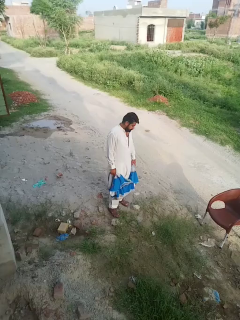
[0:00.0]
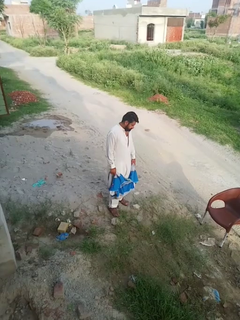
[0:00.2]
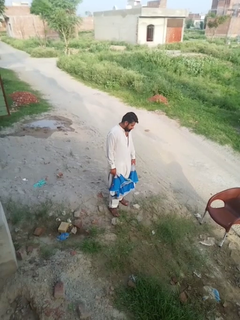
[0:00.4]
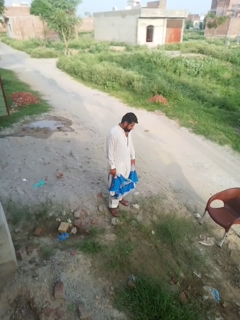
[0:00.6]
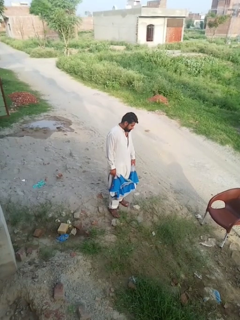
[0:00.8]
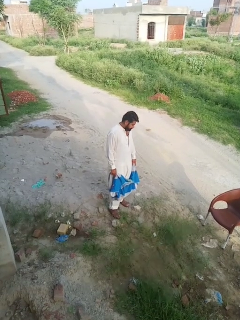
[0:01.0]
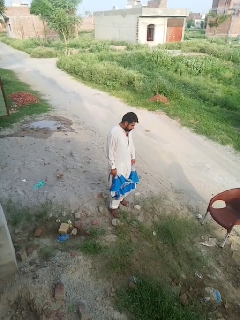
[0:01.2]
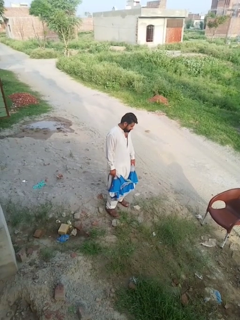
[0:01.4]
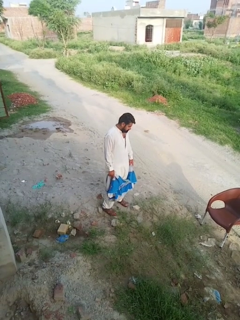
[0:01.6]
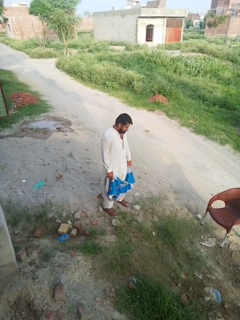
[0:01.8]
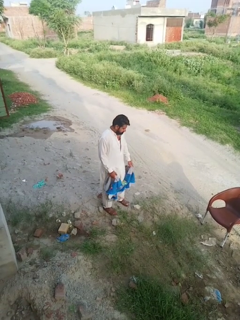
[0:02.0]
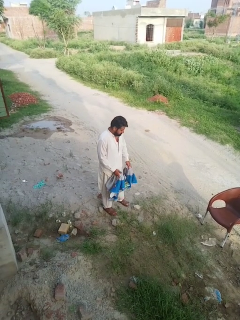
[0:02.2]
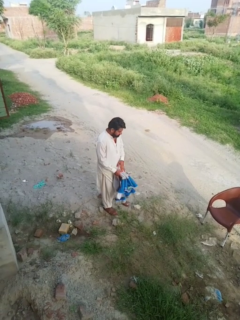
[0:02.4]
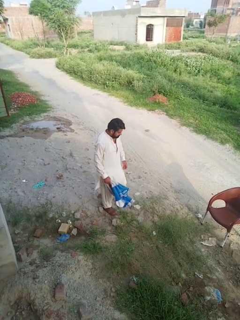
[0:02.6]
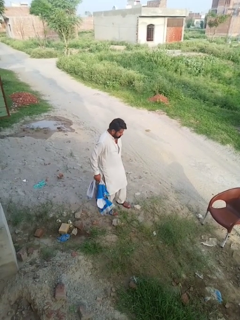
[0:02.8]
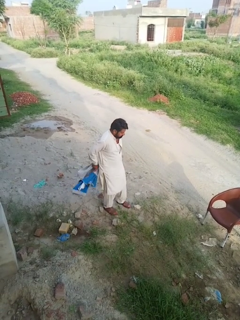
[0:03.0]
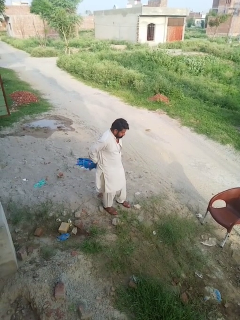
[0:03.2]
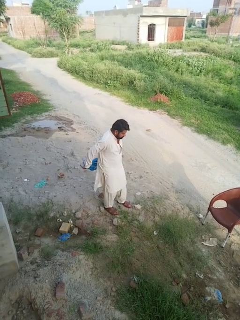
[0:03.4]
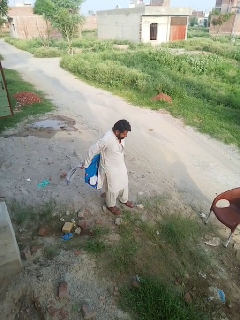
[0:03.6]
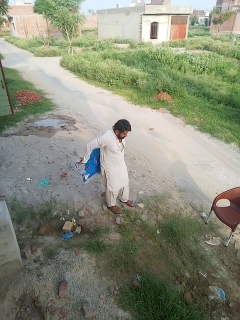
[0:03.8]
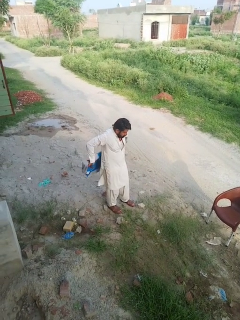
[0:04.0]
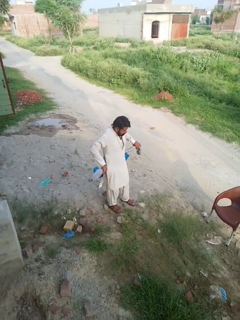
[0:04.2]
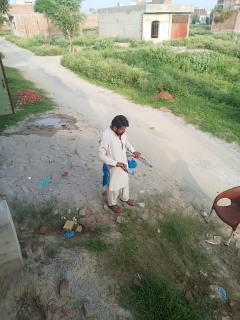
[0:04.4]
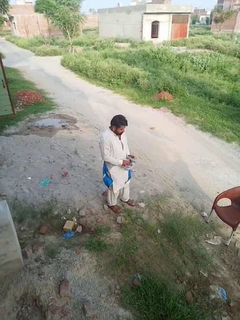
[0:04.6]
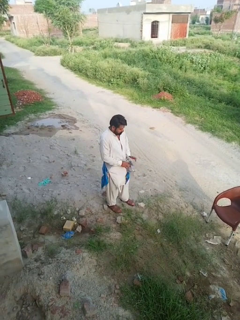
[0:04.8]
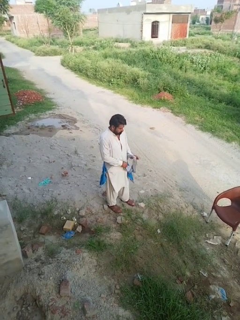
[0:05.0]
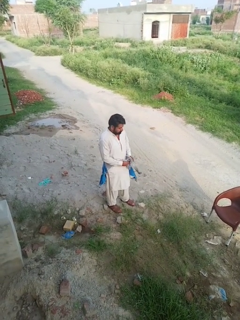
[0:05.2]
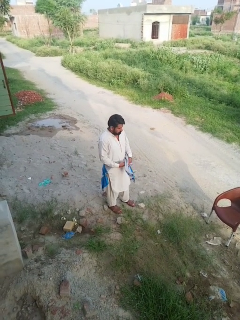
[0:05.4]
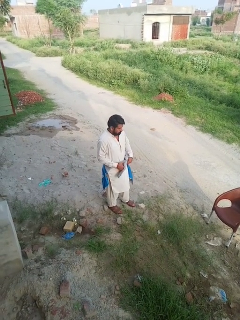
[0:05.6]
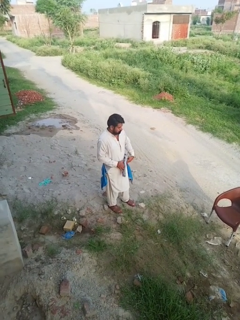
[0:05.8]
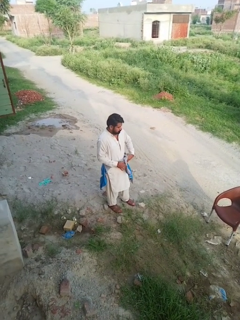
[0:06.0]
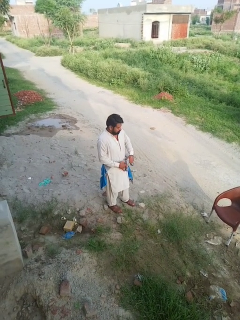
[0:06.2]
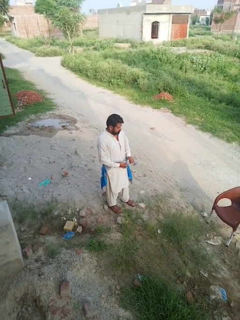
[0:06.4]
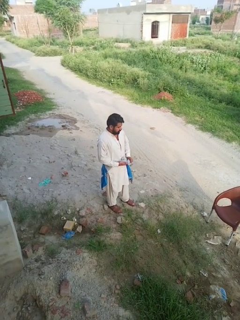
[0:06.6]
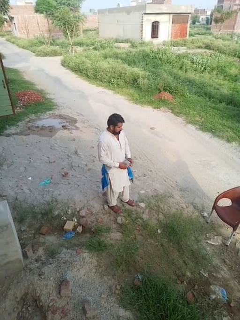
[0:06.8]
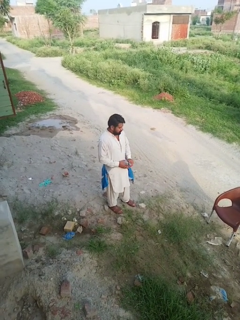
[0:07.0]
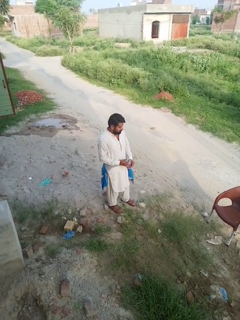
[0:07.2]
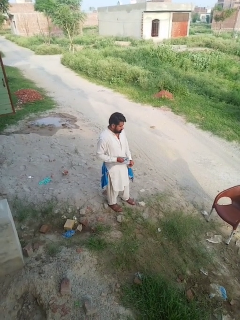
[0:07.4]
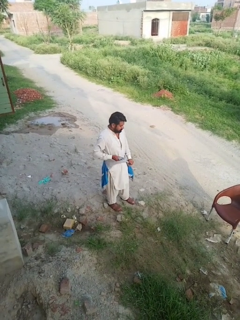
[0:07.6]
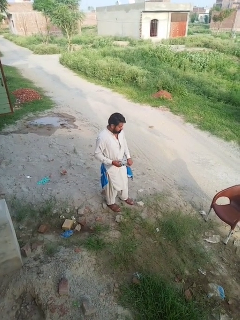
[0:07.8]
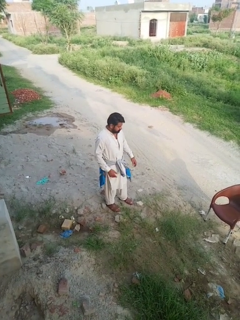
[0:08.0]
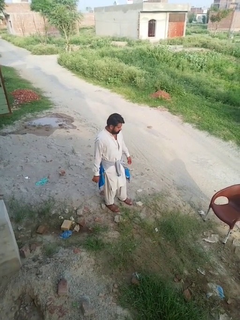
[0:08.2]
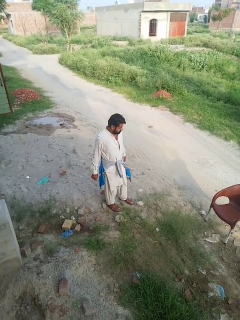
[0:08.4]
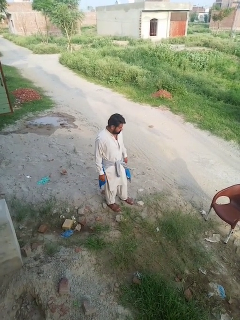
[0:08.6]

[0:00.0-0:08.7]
person ties jacket around waist

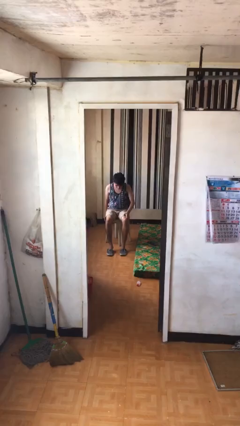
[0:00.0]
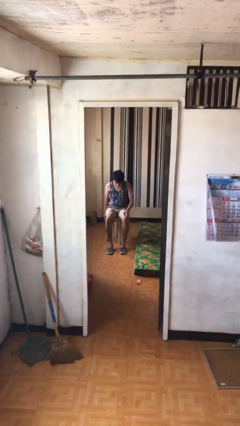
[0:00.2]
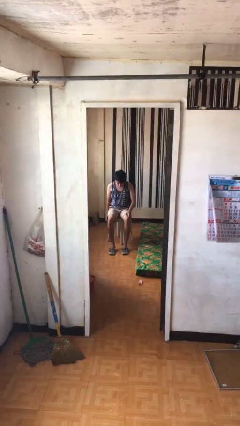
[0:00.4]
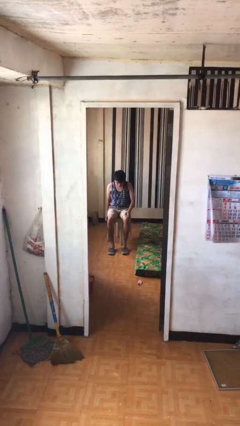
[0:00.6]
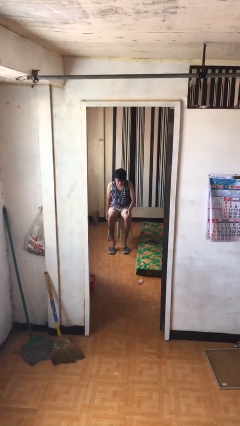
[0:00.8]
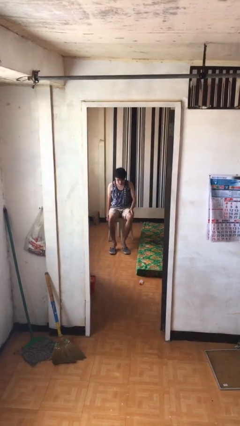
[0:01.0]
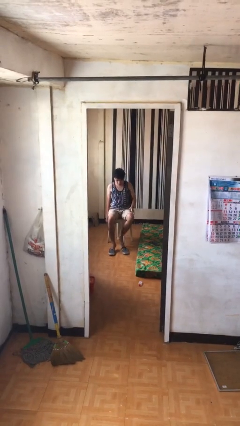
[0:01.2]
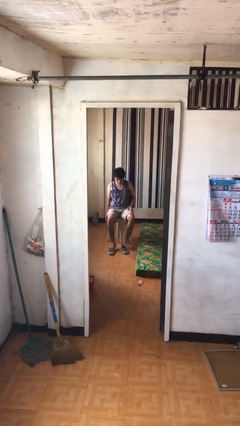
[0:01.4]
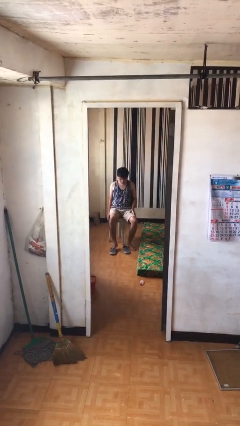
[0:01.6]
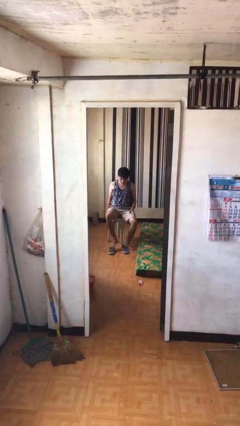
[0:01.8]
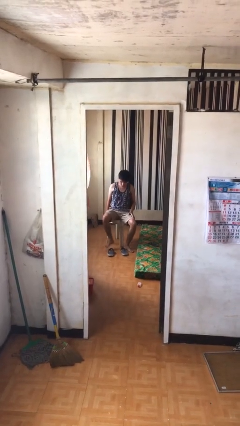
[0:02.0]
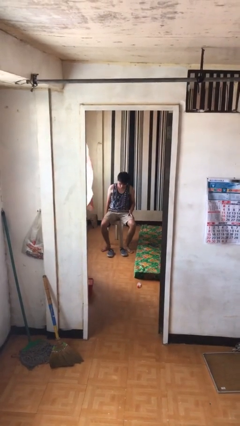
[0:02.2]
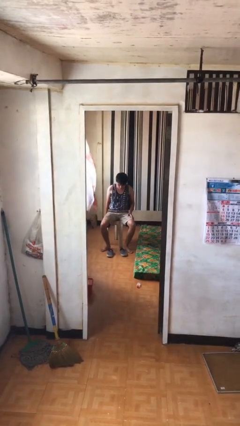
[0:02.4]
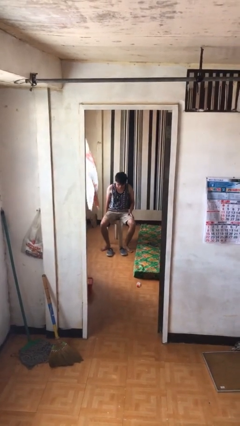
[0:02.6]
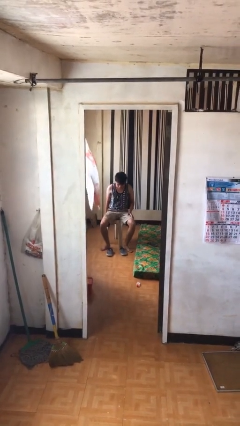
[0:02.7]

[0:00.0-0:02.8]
person takes off shoes

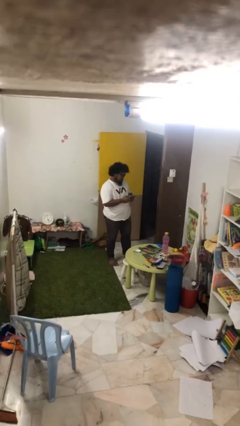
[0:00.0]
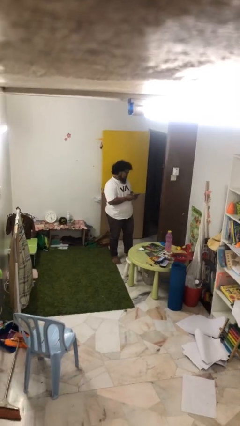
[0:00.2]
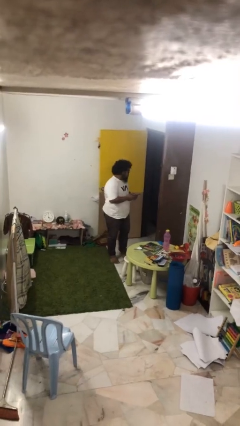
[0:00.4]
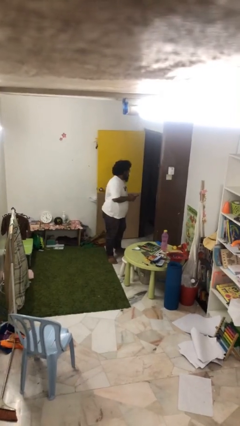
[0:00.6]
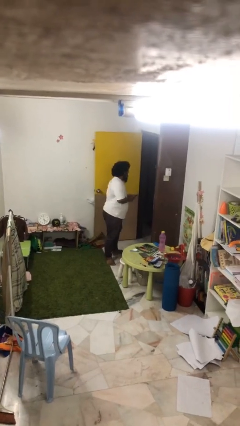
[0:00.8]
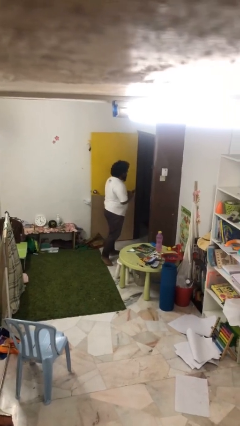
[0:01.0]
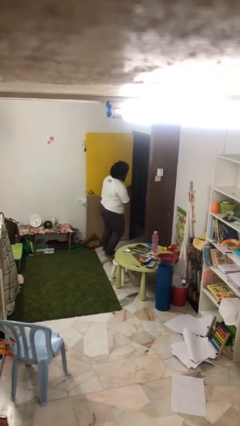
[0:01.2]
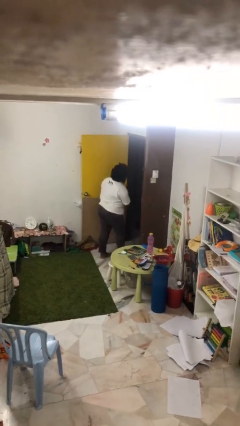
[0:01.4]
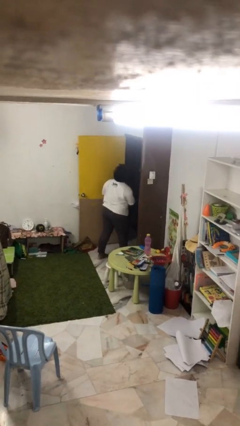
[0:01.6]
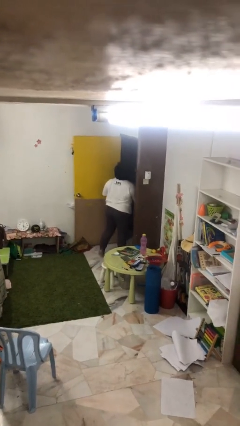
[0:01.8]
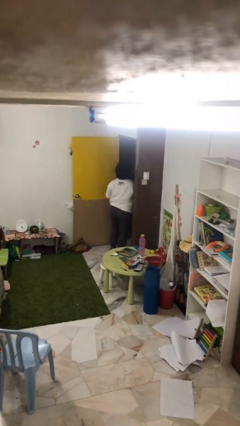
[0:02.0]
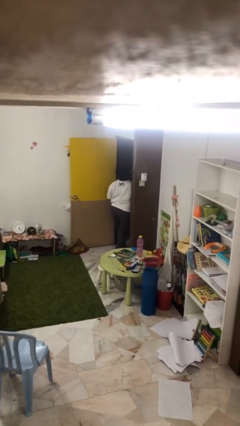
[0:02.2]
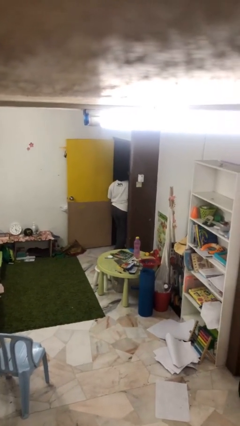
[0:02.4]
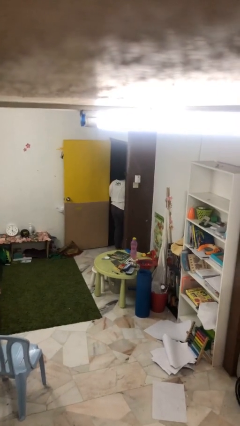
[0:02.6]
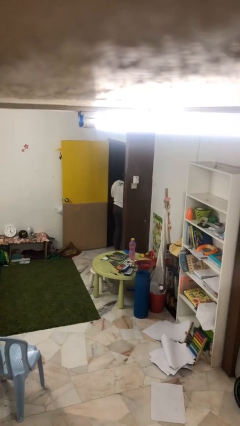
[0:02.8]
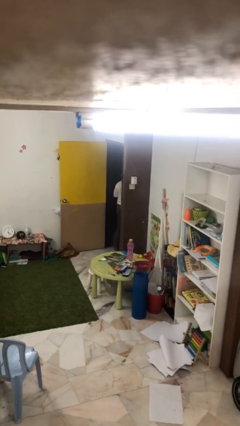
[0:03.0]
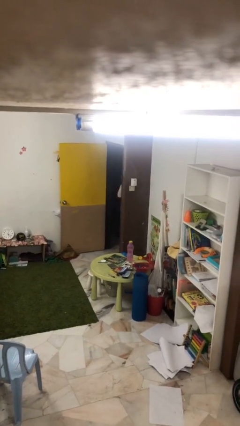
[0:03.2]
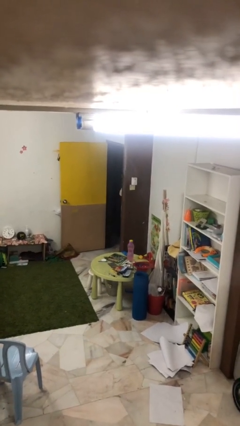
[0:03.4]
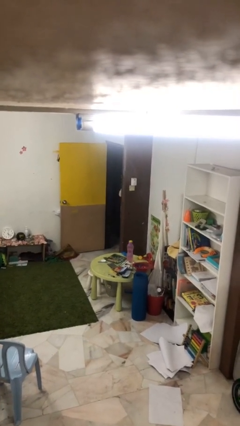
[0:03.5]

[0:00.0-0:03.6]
person exits scene through structure

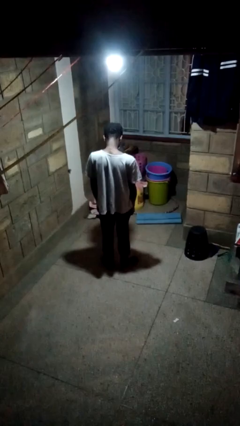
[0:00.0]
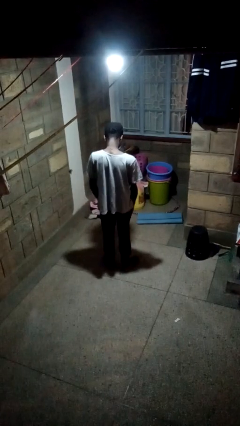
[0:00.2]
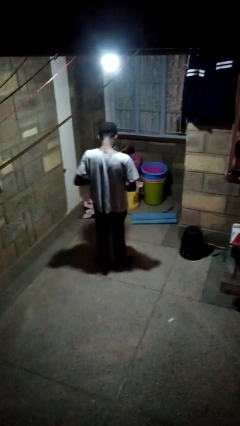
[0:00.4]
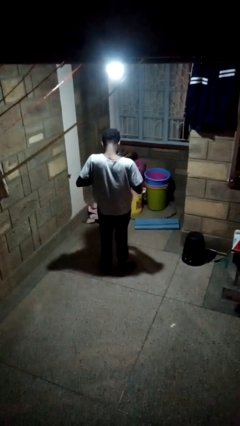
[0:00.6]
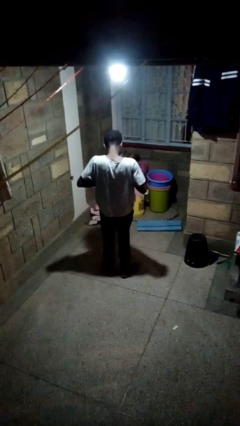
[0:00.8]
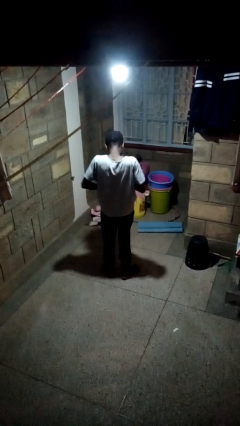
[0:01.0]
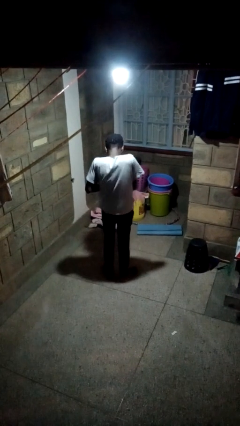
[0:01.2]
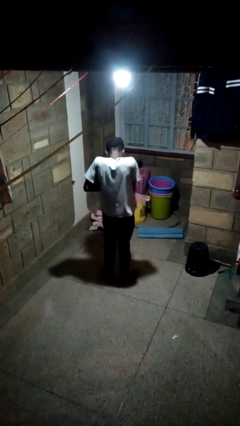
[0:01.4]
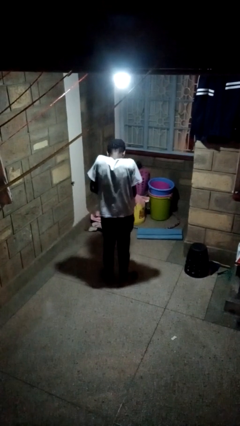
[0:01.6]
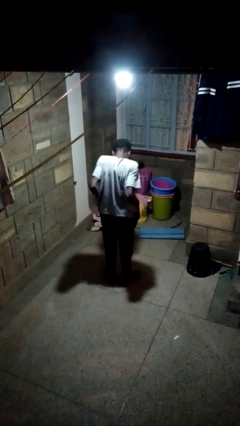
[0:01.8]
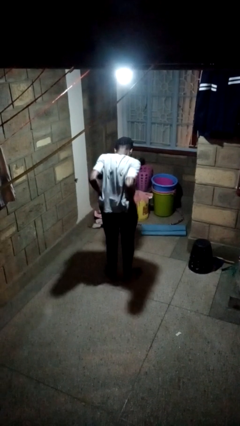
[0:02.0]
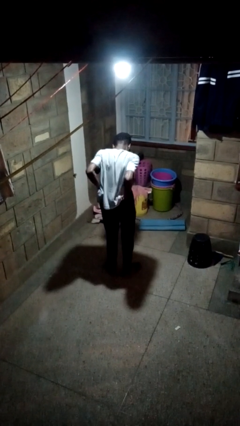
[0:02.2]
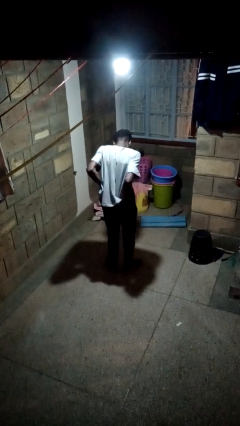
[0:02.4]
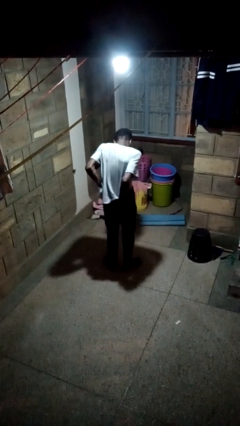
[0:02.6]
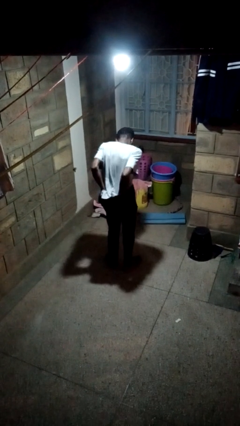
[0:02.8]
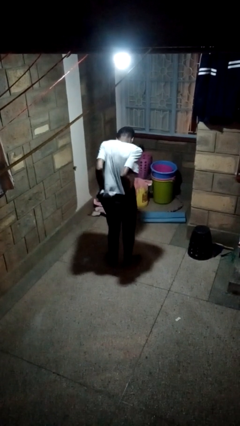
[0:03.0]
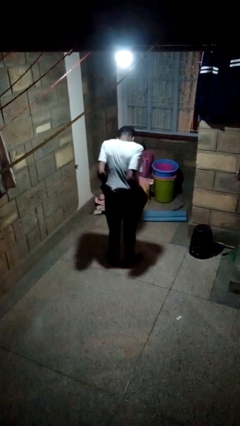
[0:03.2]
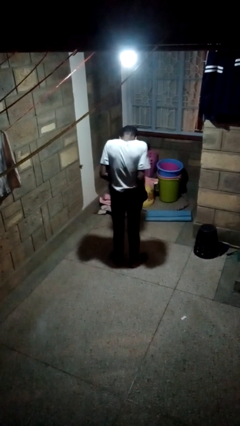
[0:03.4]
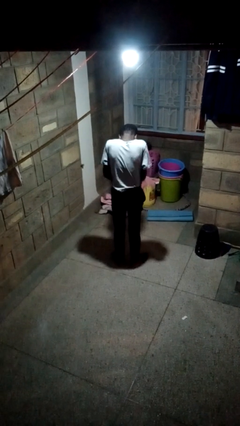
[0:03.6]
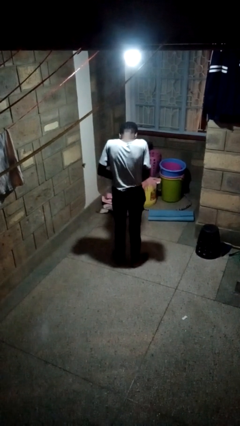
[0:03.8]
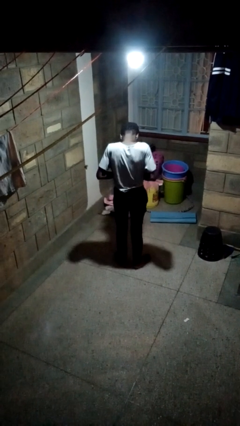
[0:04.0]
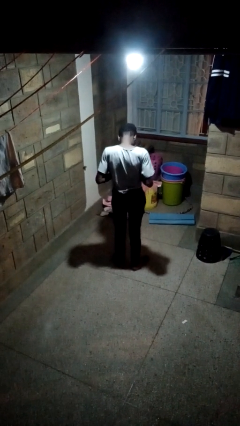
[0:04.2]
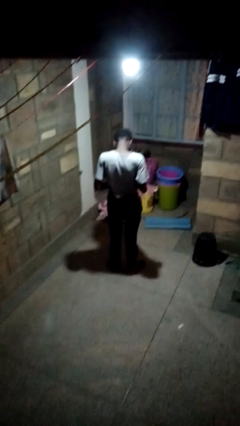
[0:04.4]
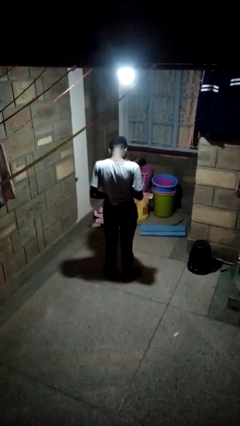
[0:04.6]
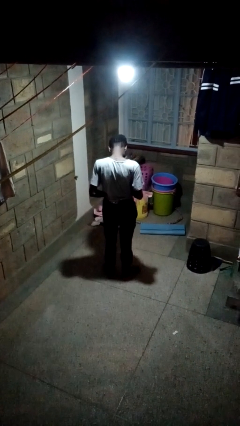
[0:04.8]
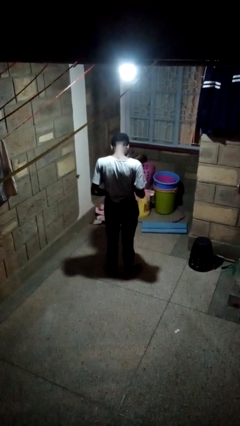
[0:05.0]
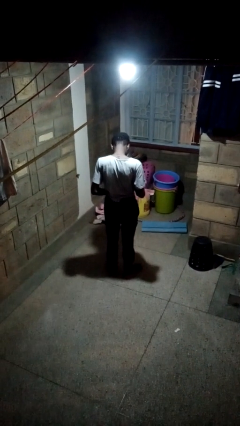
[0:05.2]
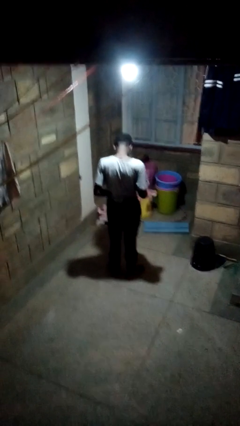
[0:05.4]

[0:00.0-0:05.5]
person tucks in shirt
